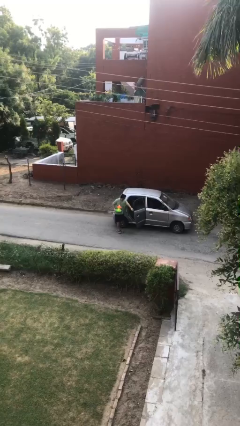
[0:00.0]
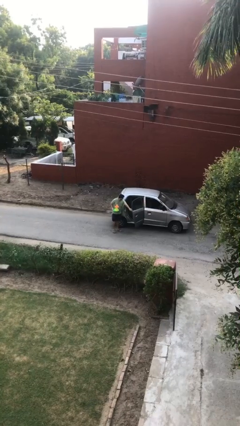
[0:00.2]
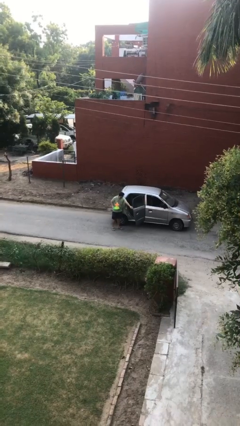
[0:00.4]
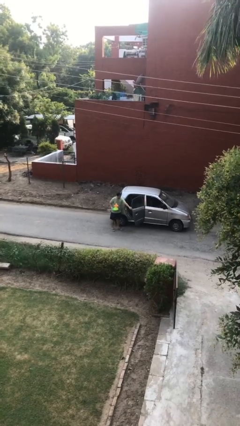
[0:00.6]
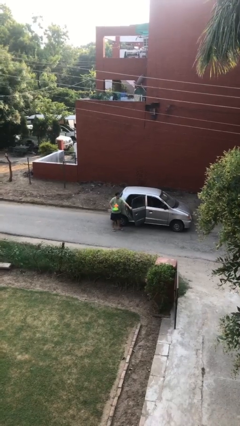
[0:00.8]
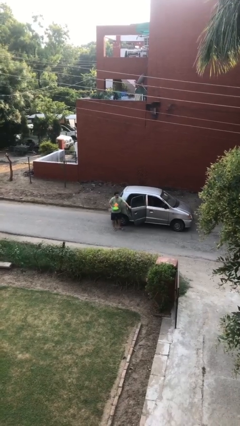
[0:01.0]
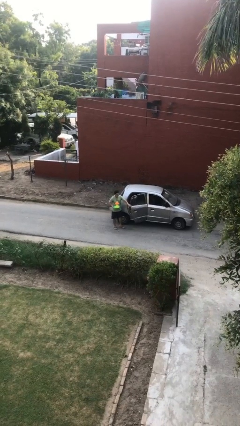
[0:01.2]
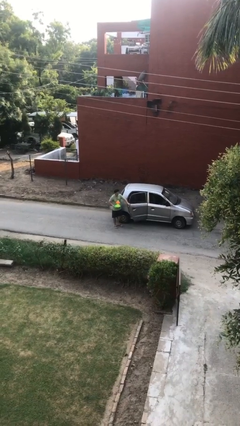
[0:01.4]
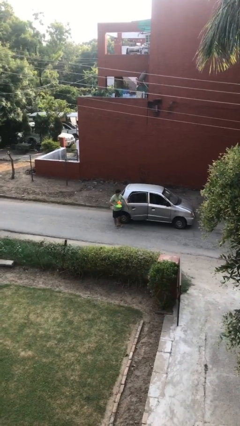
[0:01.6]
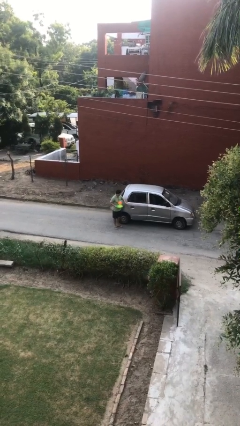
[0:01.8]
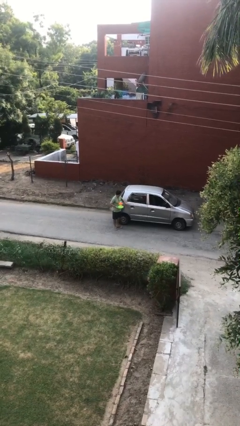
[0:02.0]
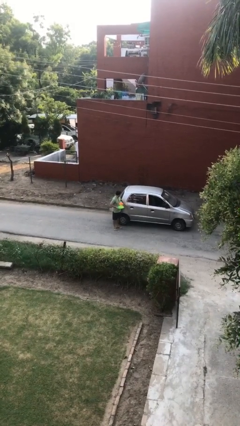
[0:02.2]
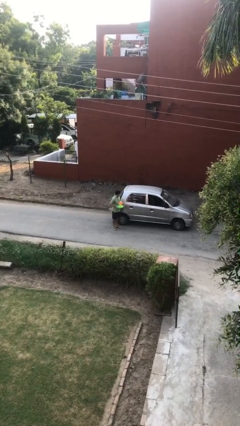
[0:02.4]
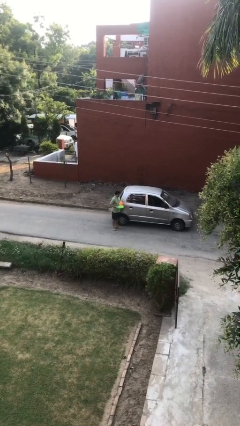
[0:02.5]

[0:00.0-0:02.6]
person closes car door

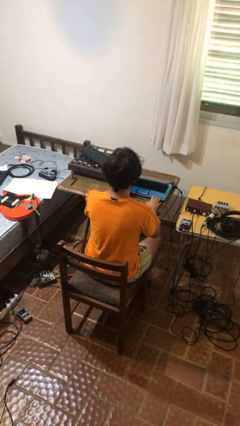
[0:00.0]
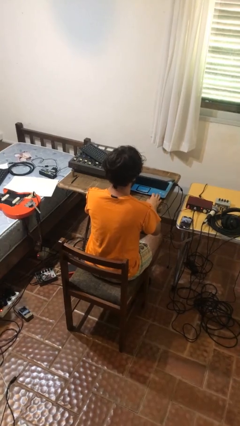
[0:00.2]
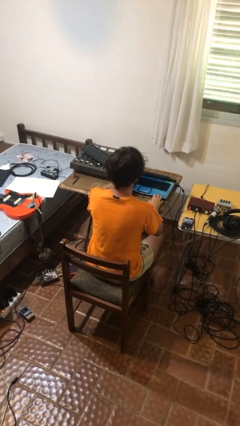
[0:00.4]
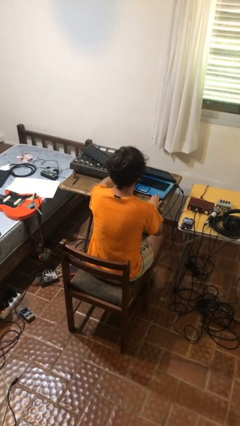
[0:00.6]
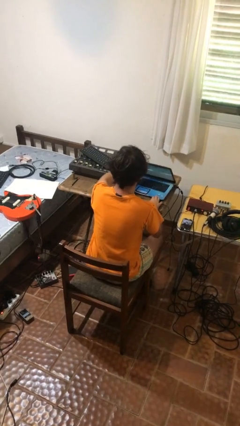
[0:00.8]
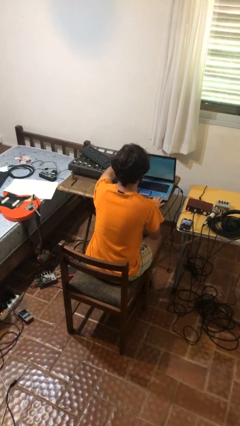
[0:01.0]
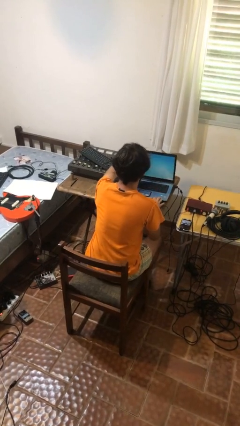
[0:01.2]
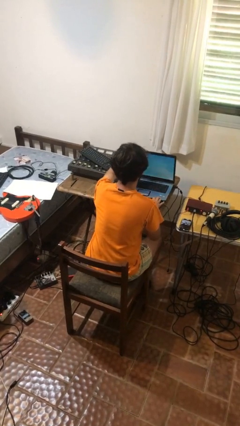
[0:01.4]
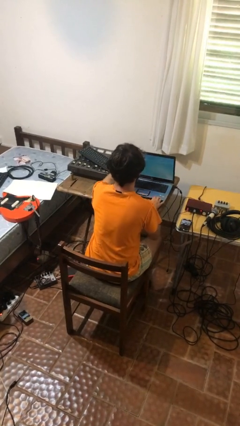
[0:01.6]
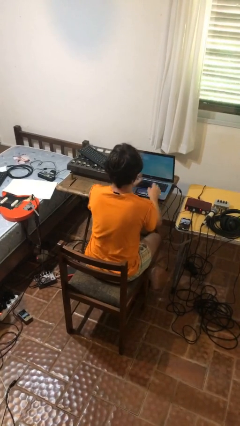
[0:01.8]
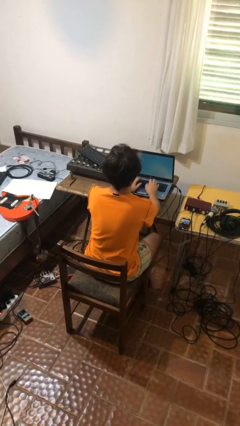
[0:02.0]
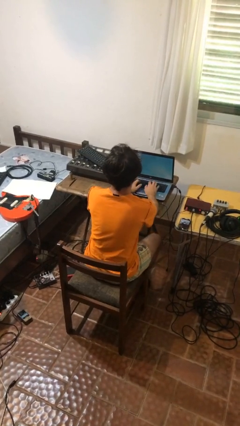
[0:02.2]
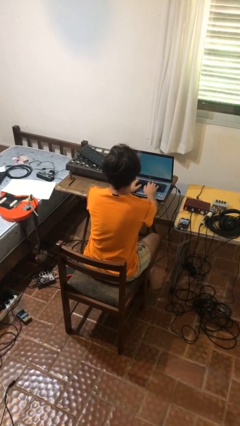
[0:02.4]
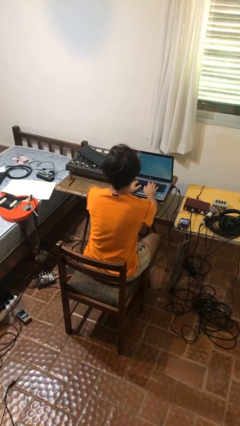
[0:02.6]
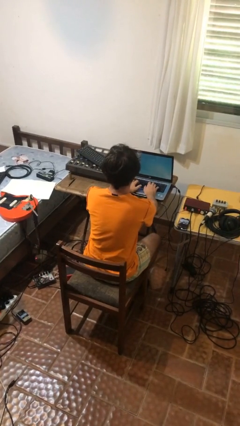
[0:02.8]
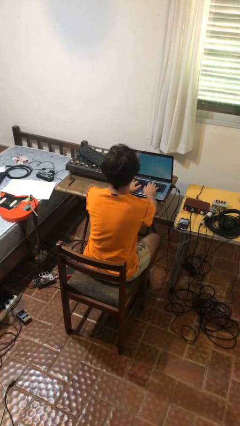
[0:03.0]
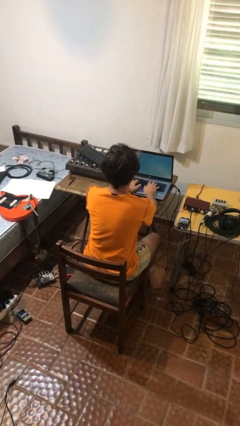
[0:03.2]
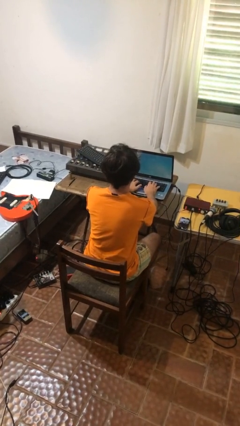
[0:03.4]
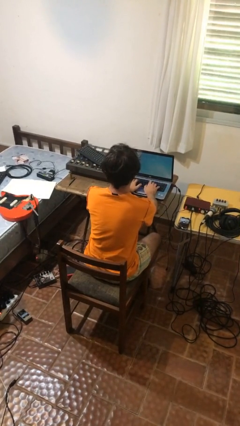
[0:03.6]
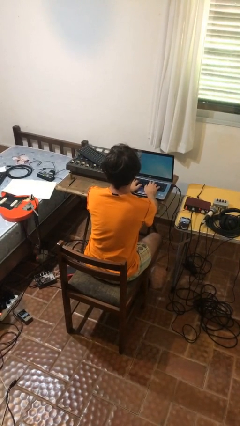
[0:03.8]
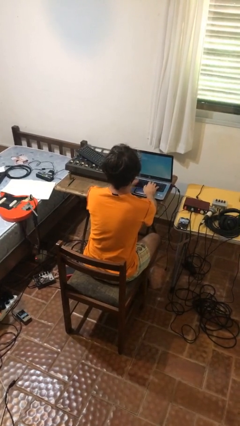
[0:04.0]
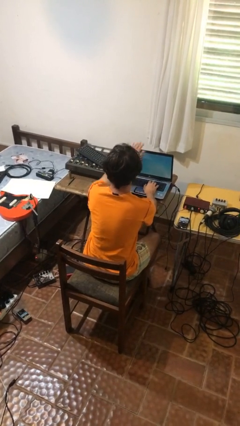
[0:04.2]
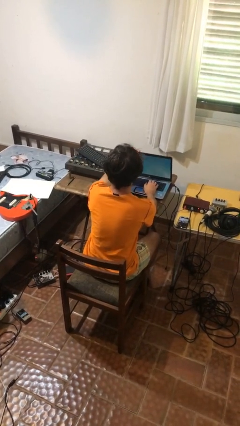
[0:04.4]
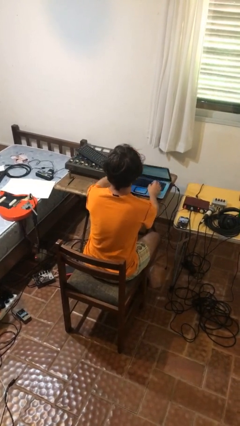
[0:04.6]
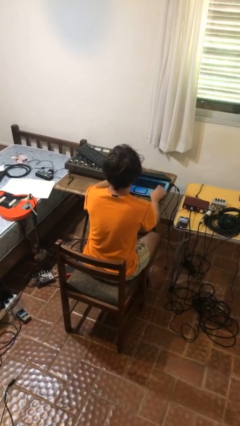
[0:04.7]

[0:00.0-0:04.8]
person interacts with laptop

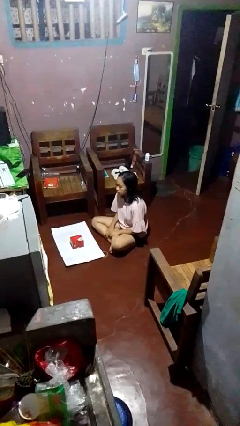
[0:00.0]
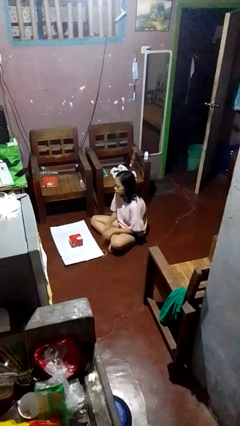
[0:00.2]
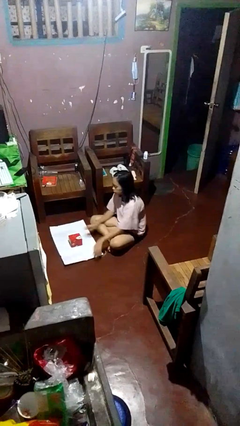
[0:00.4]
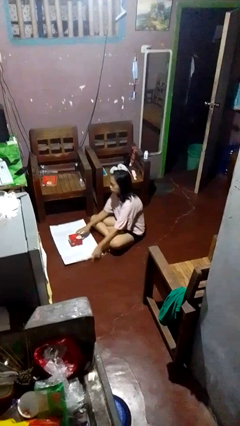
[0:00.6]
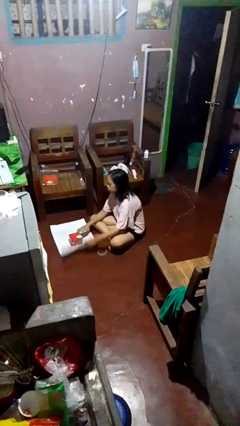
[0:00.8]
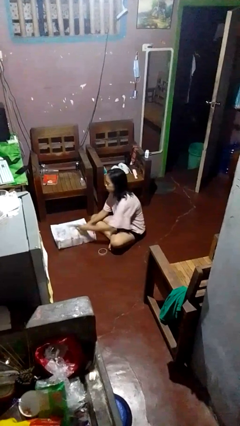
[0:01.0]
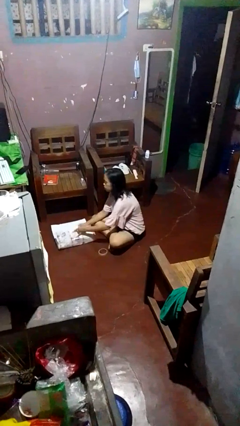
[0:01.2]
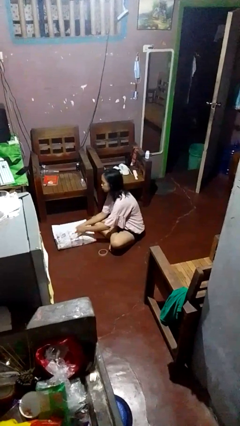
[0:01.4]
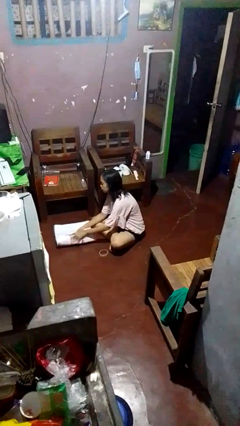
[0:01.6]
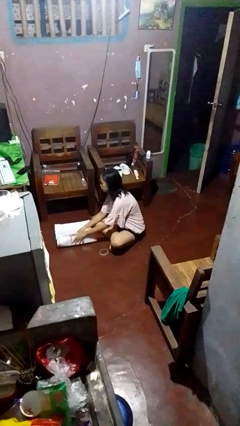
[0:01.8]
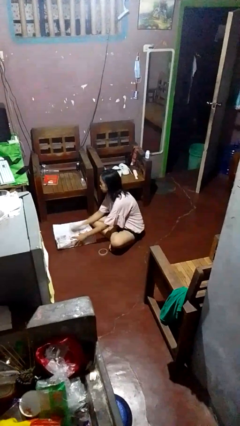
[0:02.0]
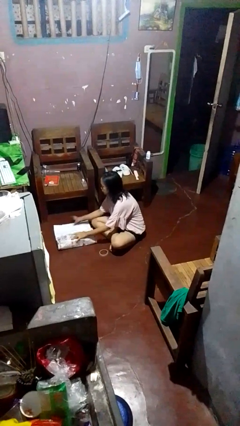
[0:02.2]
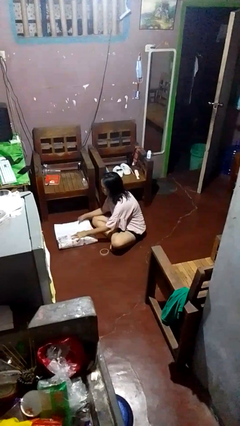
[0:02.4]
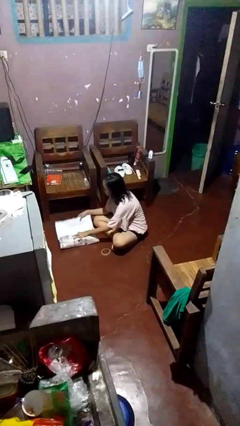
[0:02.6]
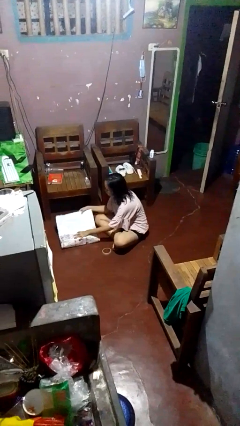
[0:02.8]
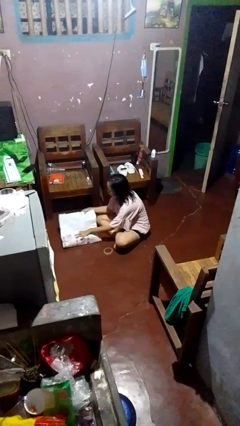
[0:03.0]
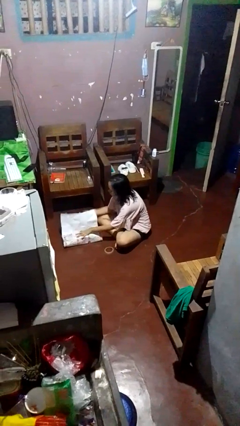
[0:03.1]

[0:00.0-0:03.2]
person wraps box

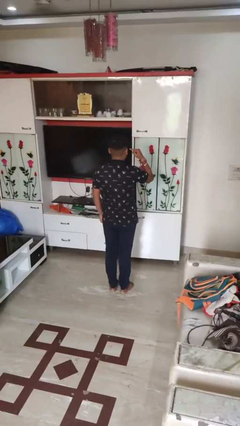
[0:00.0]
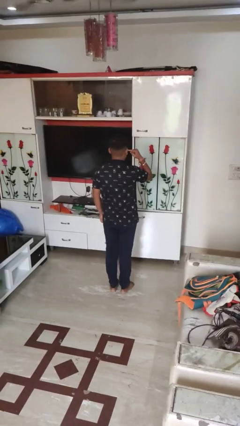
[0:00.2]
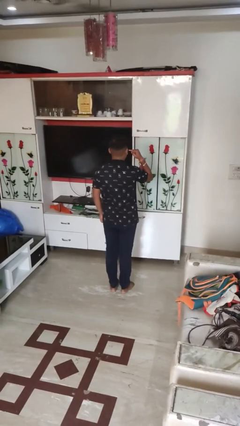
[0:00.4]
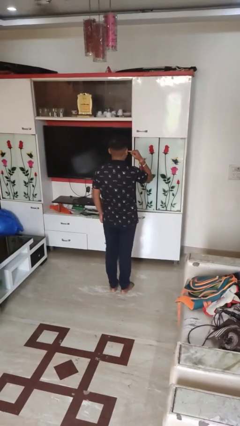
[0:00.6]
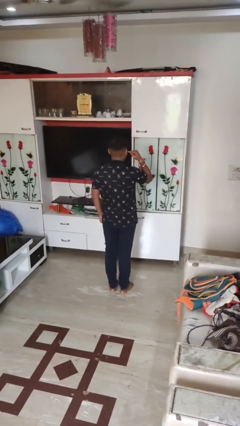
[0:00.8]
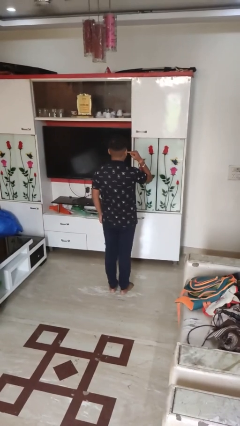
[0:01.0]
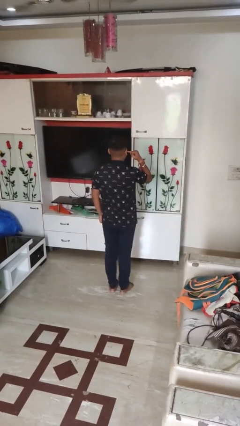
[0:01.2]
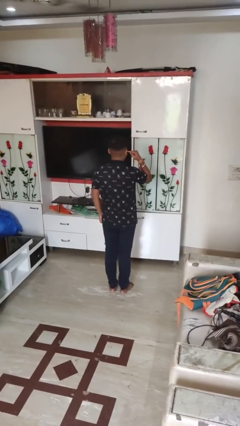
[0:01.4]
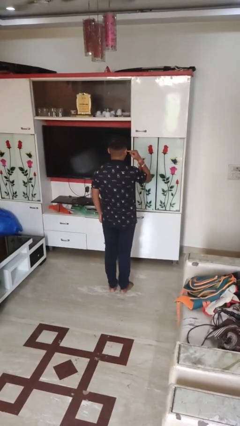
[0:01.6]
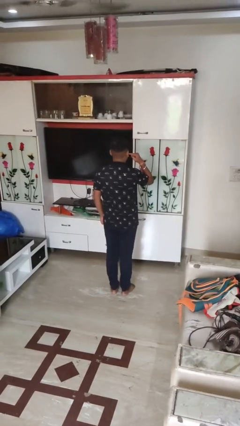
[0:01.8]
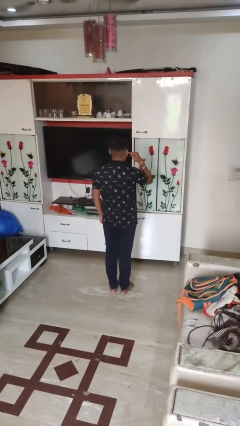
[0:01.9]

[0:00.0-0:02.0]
person gestures listen closely

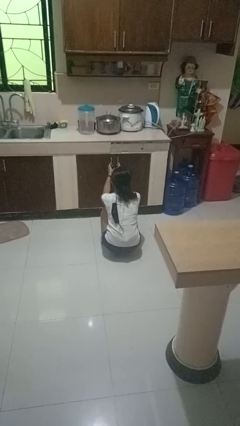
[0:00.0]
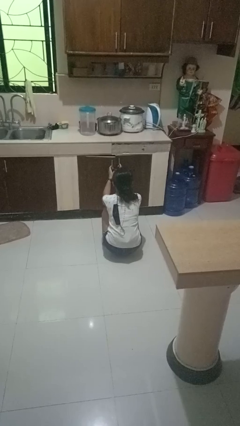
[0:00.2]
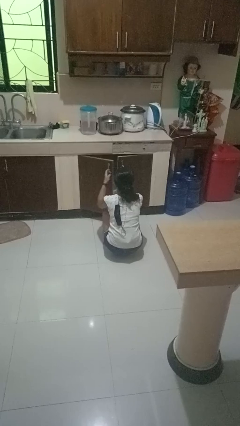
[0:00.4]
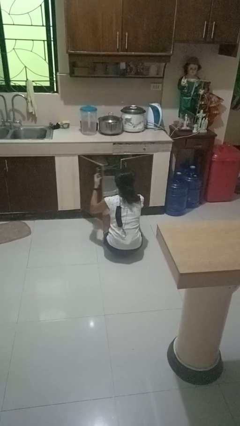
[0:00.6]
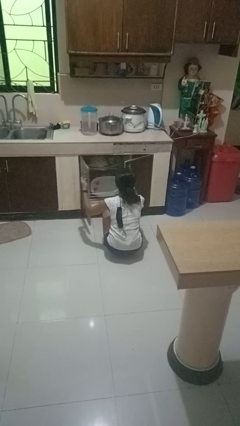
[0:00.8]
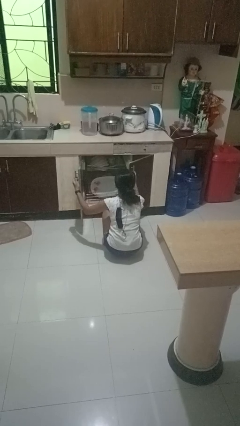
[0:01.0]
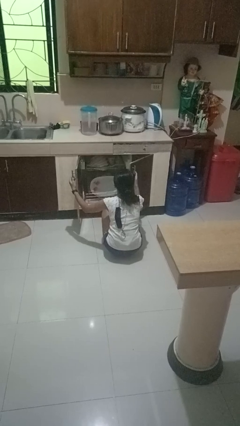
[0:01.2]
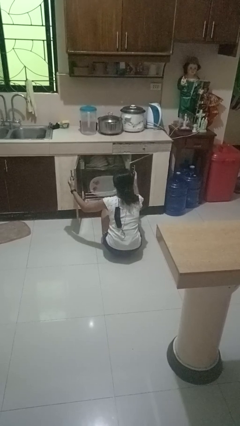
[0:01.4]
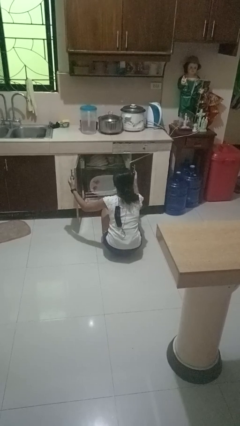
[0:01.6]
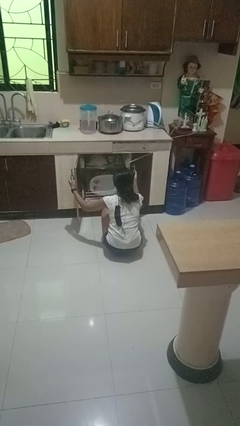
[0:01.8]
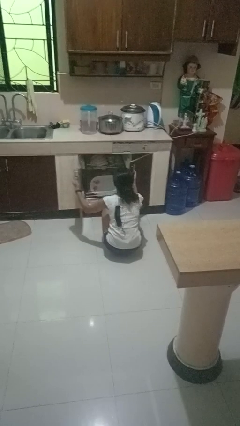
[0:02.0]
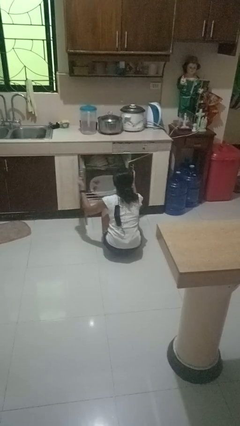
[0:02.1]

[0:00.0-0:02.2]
person opens dishwasher

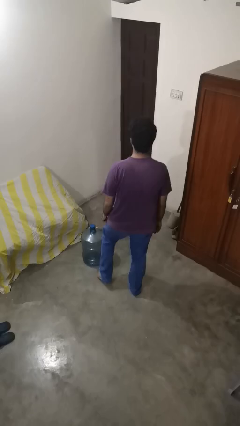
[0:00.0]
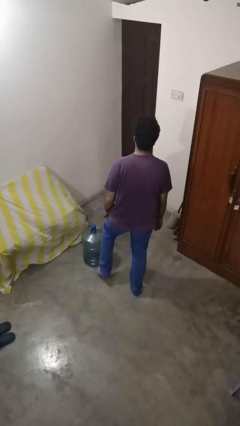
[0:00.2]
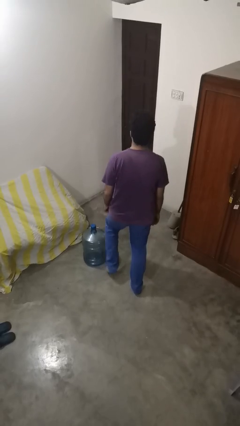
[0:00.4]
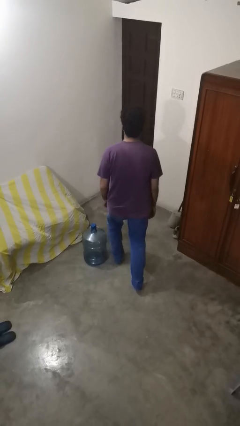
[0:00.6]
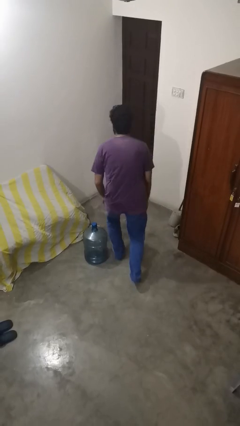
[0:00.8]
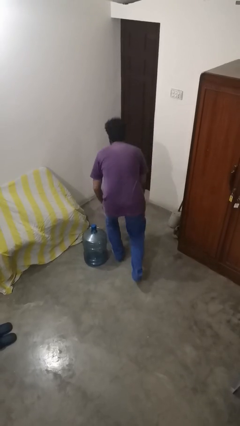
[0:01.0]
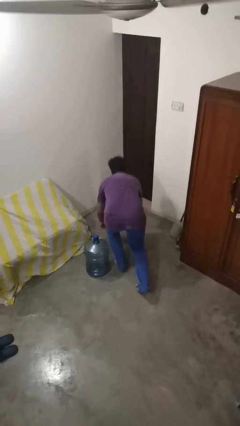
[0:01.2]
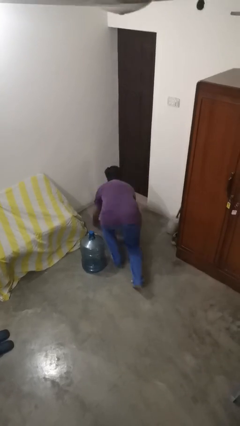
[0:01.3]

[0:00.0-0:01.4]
person trips on object on floor

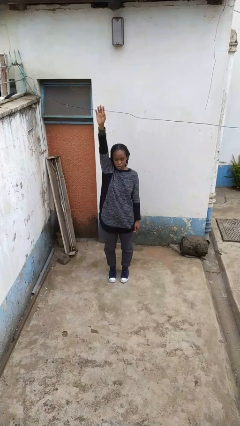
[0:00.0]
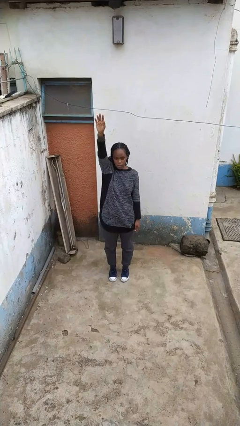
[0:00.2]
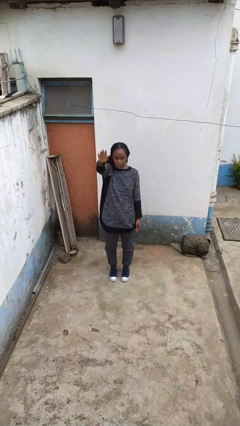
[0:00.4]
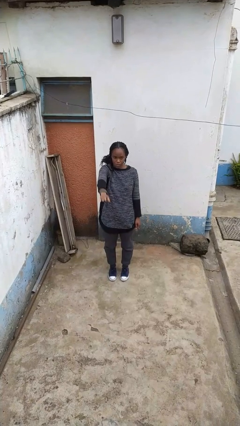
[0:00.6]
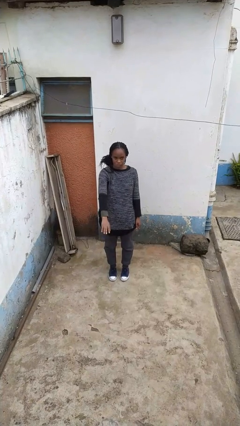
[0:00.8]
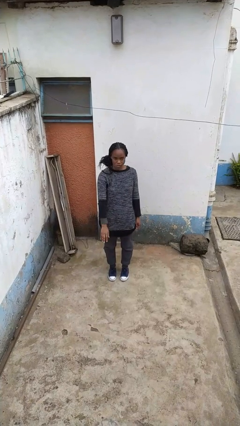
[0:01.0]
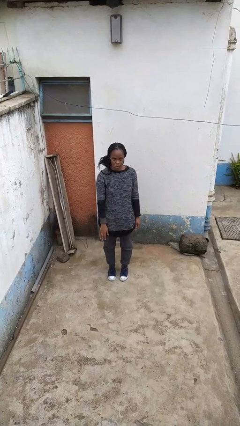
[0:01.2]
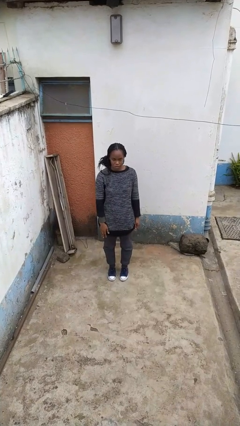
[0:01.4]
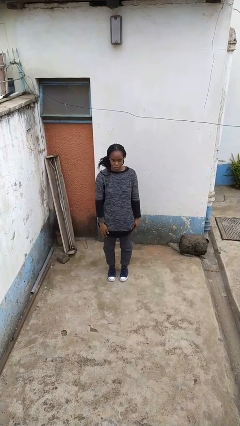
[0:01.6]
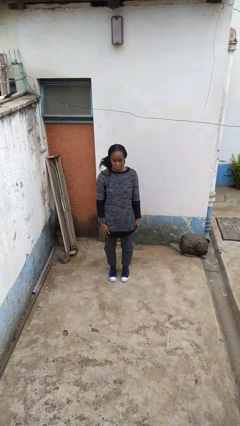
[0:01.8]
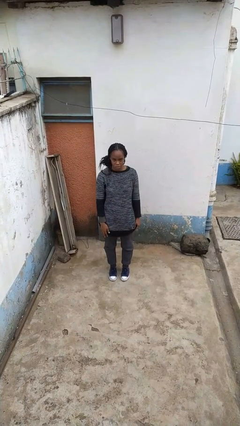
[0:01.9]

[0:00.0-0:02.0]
person gestures lower hand
